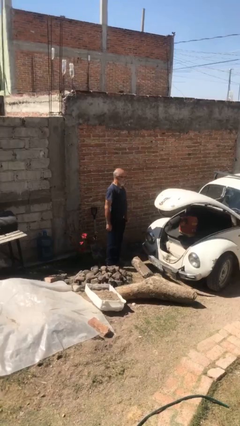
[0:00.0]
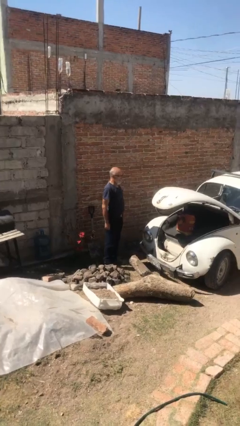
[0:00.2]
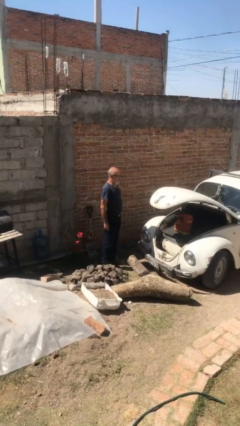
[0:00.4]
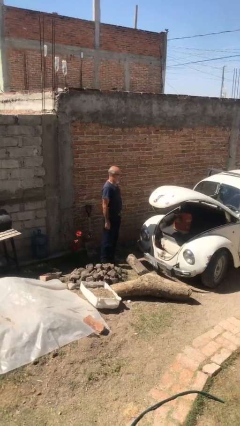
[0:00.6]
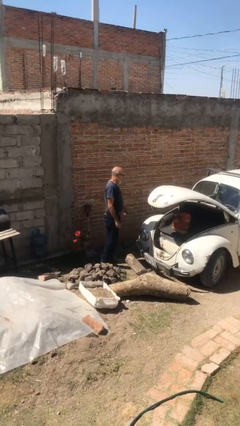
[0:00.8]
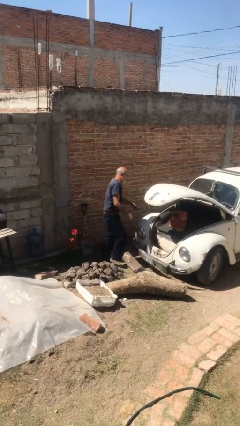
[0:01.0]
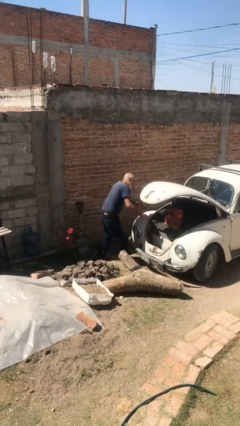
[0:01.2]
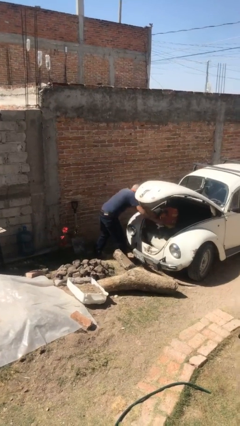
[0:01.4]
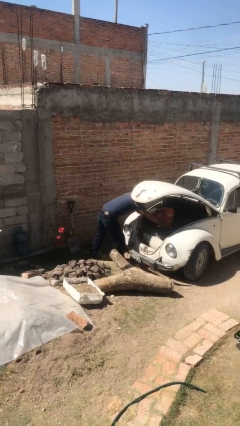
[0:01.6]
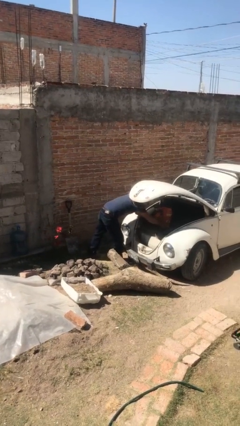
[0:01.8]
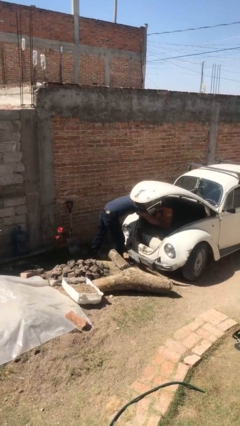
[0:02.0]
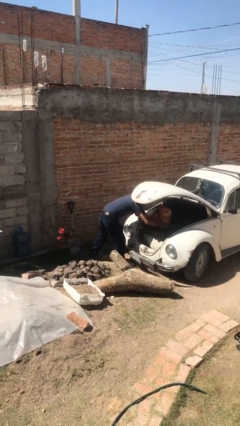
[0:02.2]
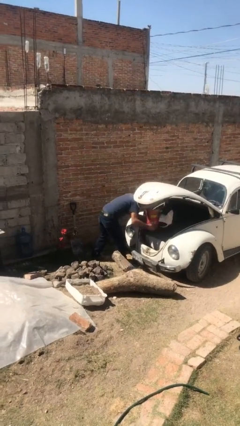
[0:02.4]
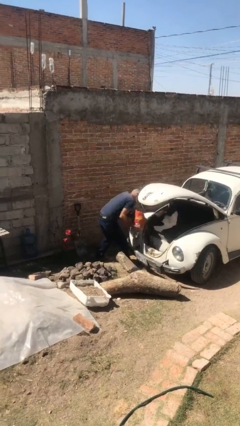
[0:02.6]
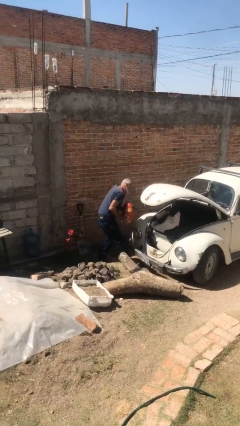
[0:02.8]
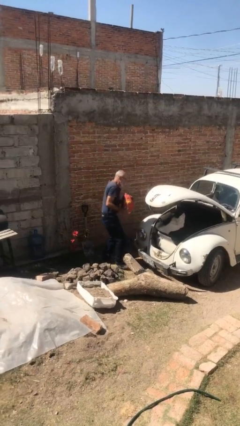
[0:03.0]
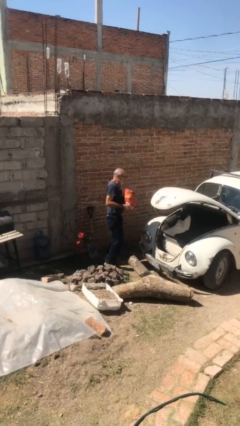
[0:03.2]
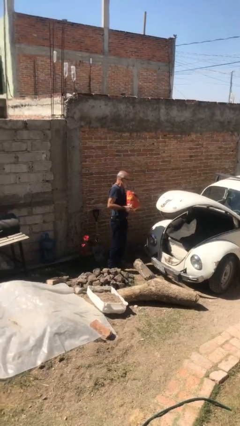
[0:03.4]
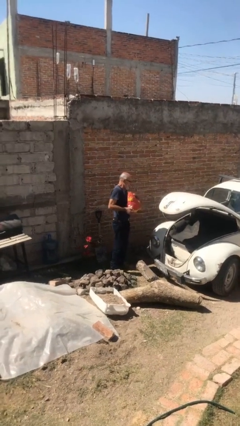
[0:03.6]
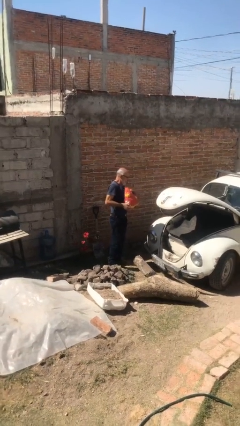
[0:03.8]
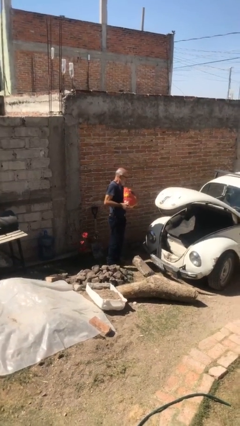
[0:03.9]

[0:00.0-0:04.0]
person unloads car

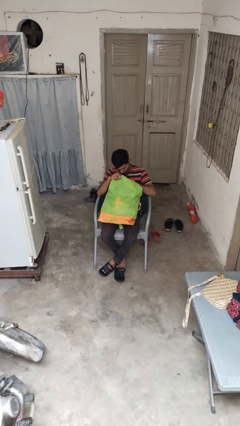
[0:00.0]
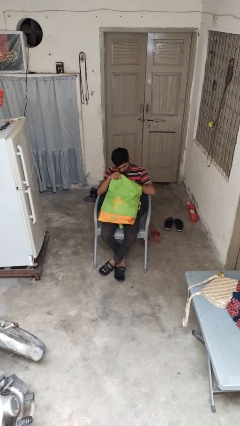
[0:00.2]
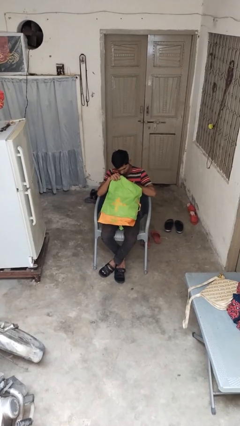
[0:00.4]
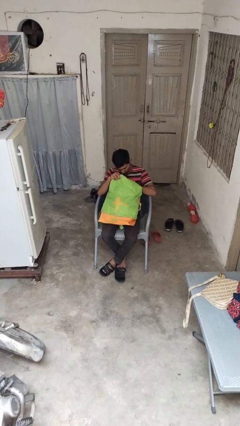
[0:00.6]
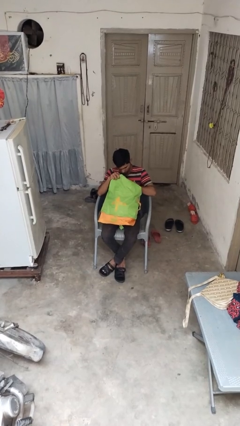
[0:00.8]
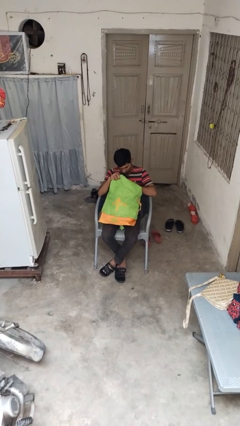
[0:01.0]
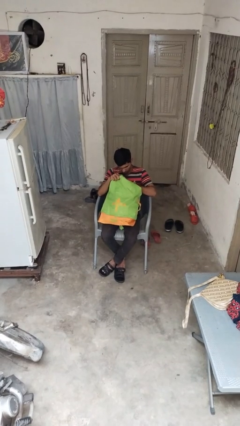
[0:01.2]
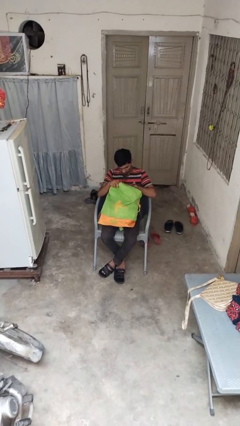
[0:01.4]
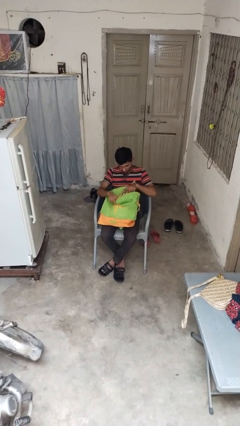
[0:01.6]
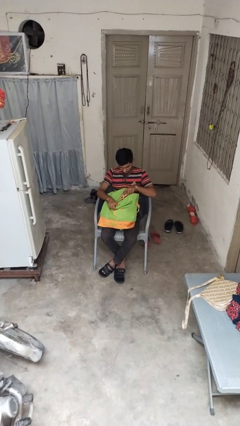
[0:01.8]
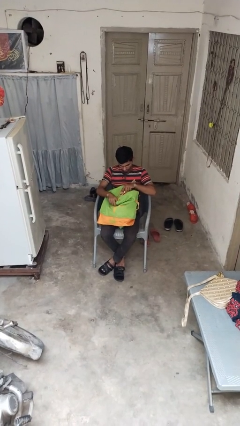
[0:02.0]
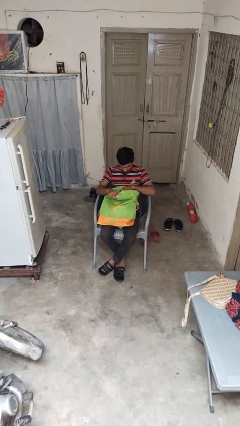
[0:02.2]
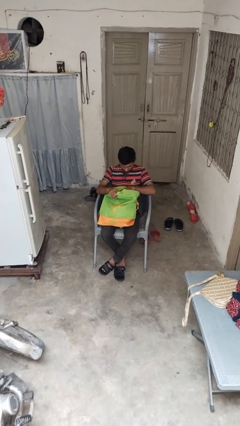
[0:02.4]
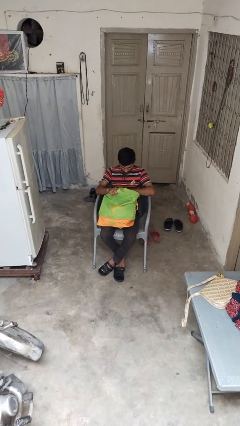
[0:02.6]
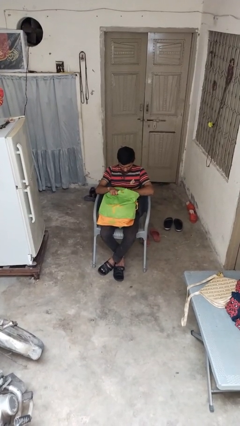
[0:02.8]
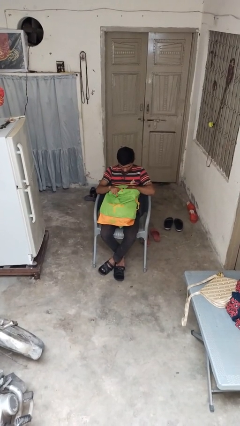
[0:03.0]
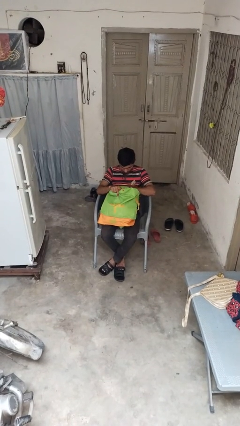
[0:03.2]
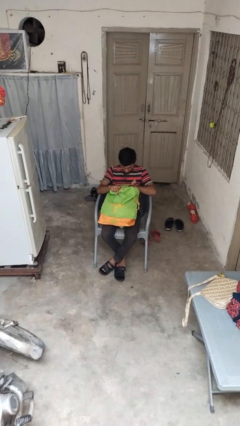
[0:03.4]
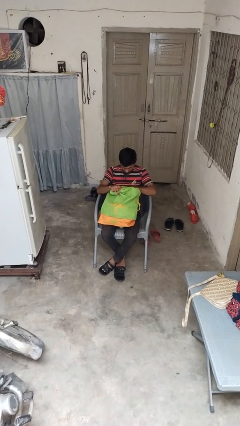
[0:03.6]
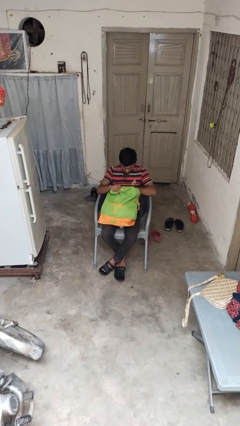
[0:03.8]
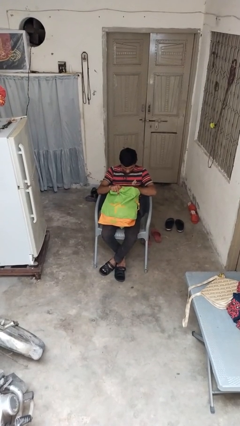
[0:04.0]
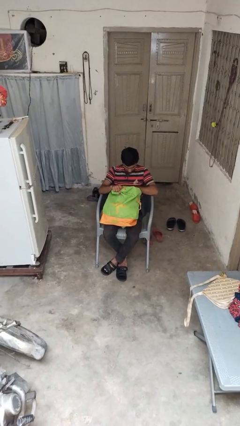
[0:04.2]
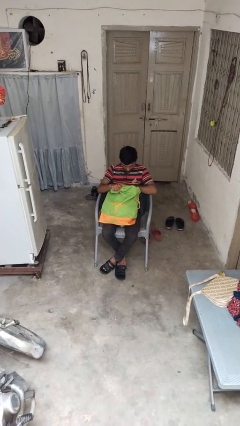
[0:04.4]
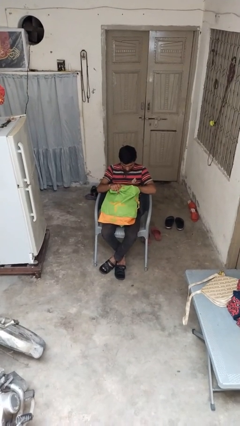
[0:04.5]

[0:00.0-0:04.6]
person searches in backpack

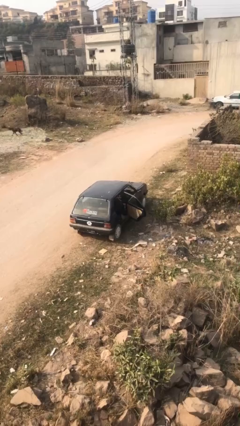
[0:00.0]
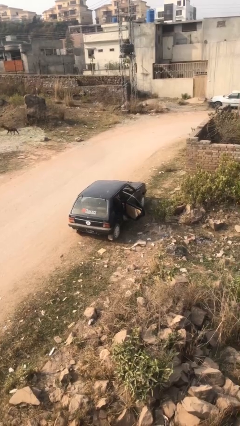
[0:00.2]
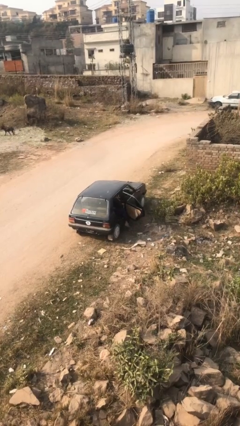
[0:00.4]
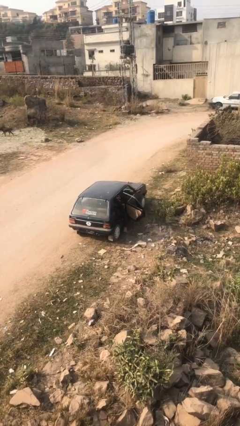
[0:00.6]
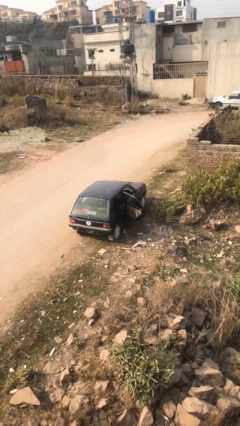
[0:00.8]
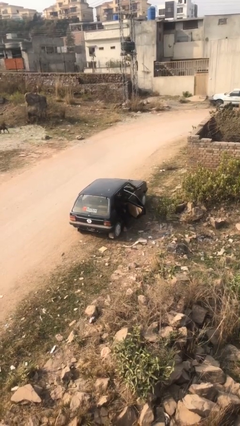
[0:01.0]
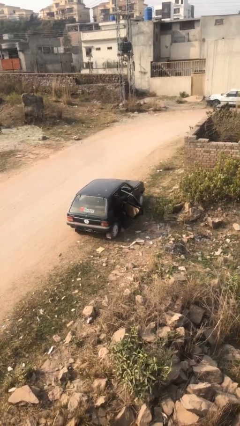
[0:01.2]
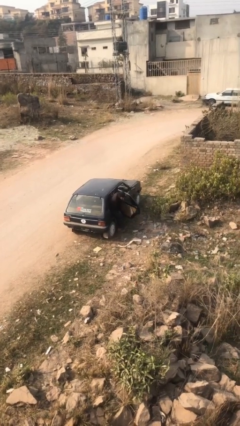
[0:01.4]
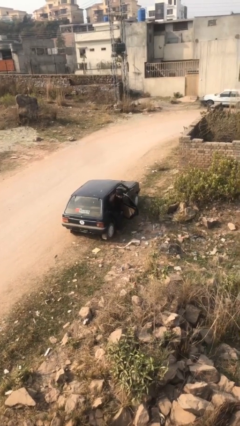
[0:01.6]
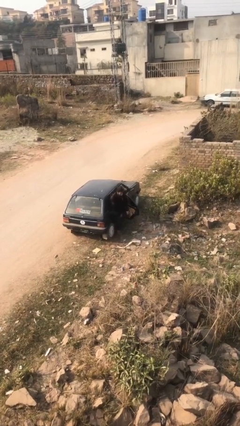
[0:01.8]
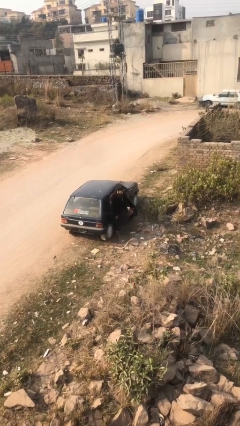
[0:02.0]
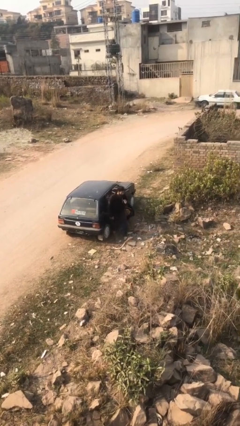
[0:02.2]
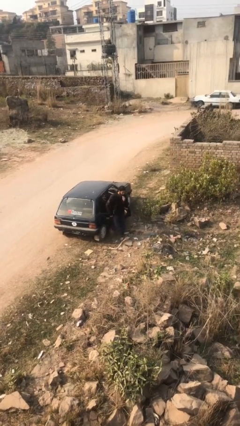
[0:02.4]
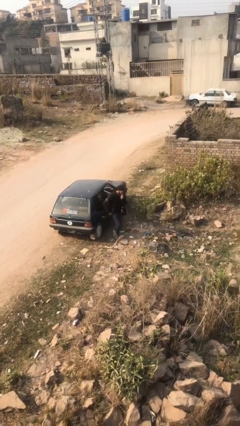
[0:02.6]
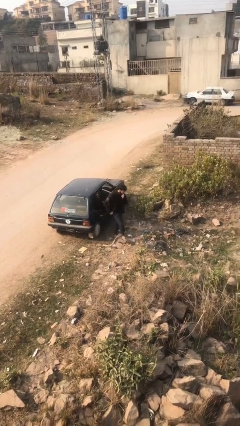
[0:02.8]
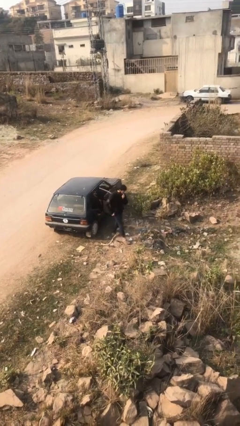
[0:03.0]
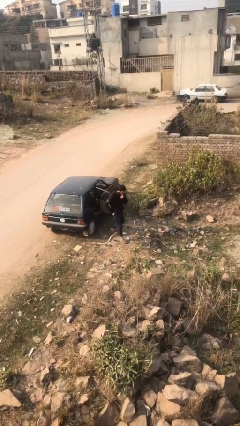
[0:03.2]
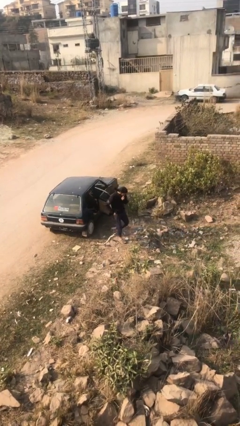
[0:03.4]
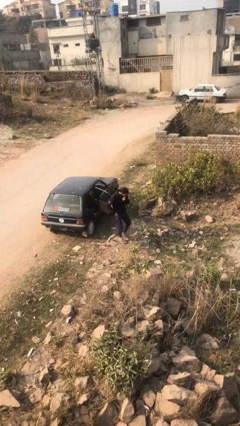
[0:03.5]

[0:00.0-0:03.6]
person exits car

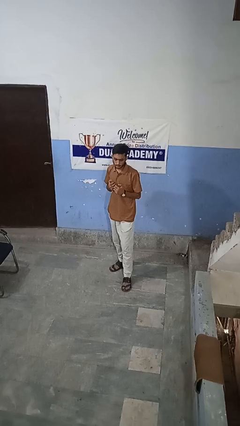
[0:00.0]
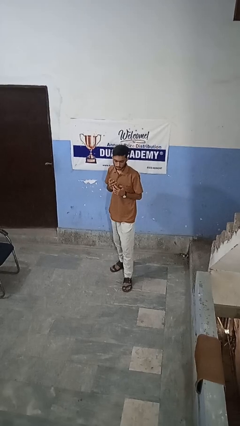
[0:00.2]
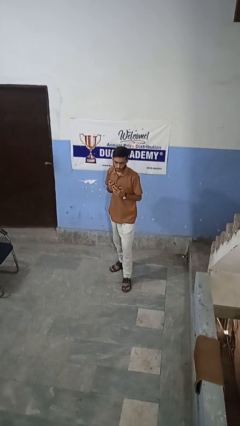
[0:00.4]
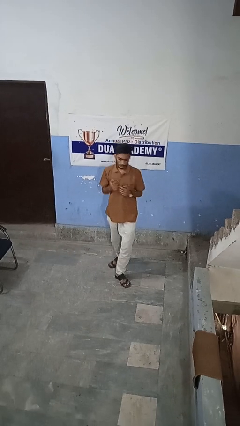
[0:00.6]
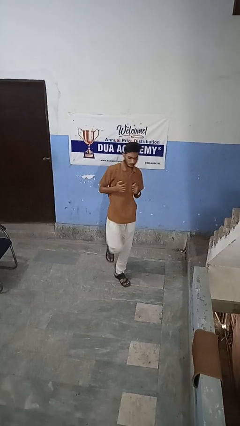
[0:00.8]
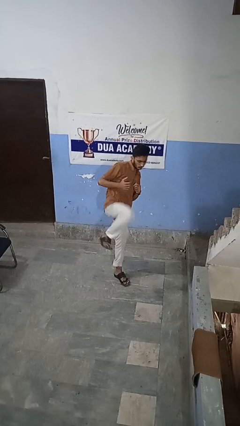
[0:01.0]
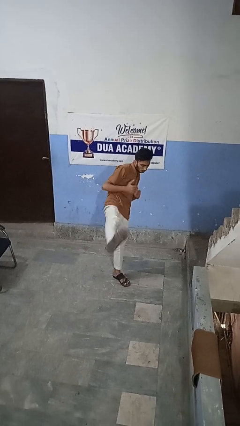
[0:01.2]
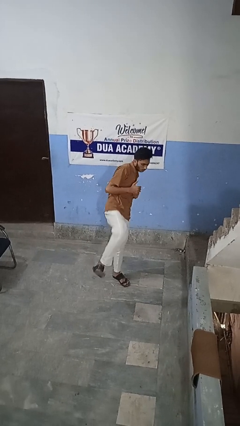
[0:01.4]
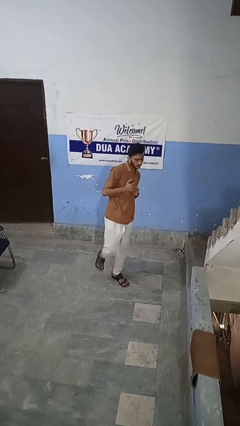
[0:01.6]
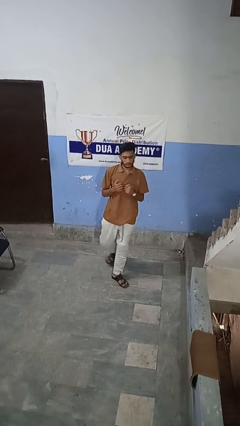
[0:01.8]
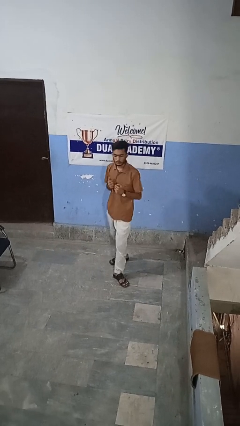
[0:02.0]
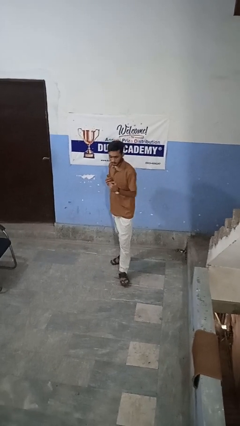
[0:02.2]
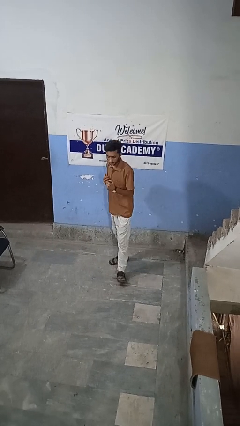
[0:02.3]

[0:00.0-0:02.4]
person karate kicks

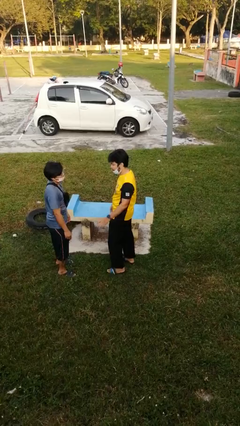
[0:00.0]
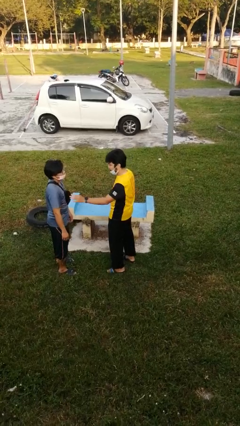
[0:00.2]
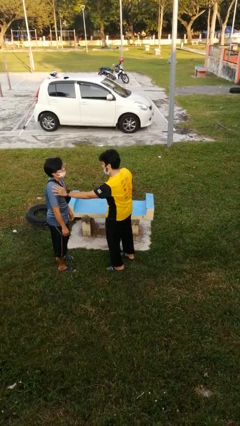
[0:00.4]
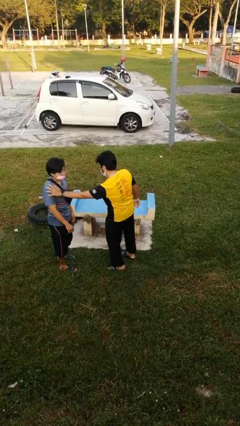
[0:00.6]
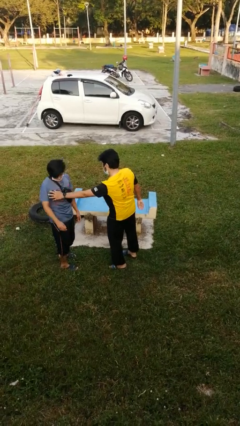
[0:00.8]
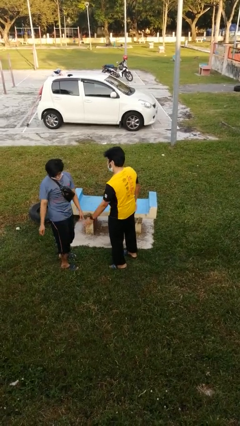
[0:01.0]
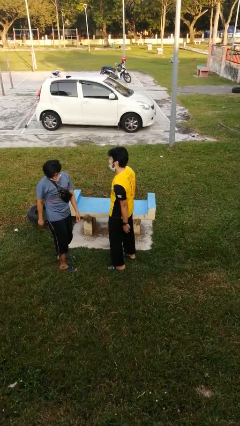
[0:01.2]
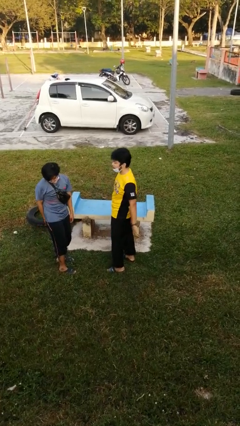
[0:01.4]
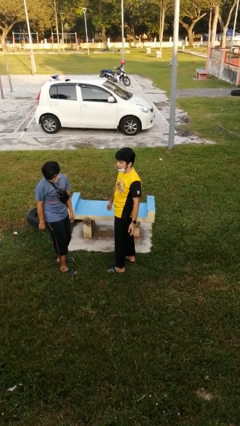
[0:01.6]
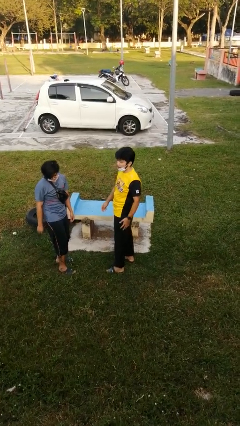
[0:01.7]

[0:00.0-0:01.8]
person shoves person

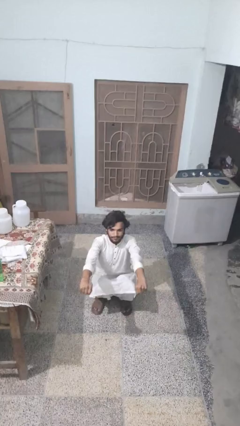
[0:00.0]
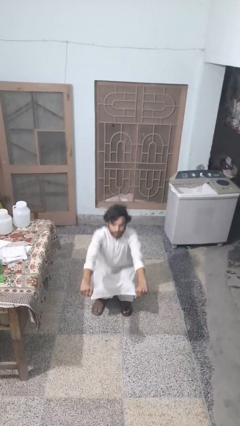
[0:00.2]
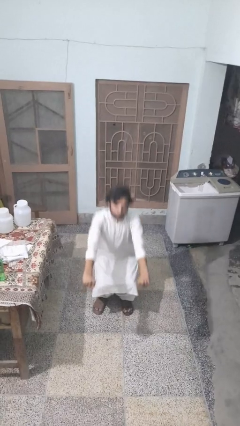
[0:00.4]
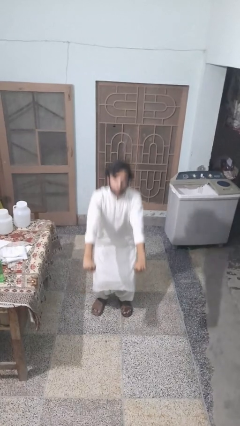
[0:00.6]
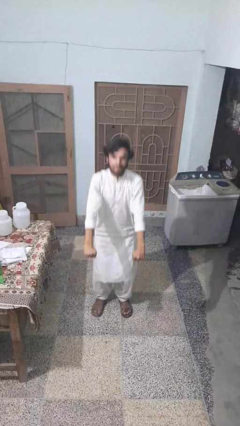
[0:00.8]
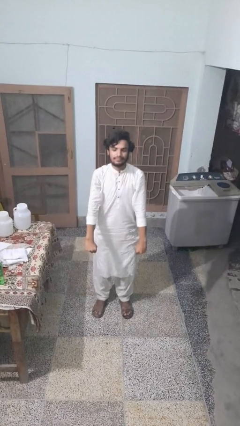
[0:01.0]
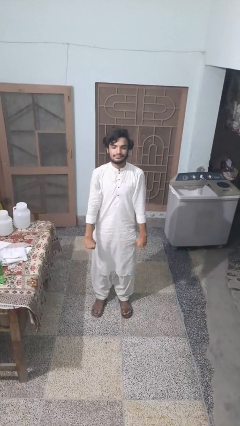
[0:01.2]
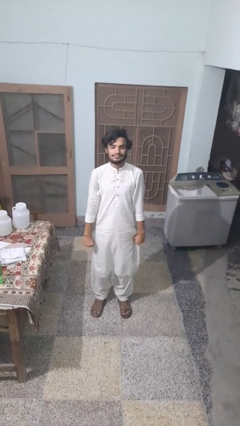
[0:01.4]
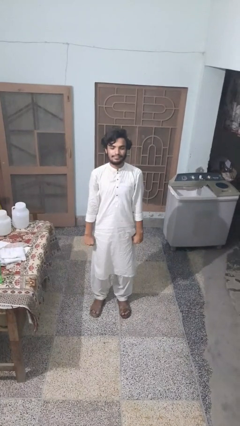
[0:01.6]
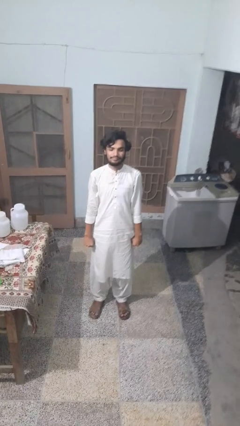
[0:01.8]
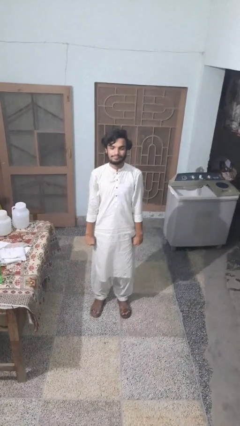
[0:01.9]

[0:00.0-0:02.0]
person stands up
